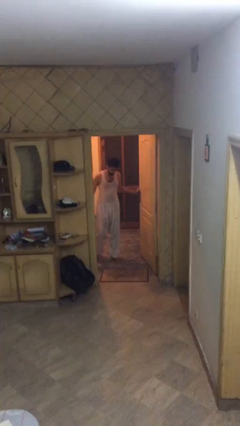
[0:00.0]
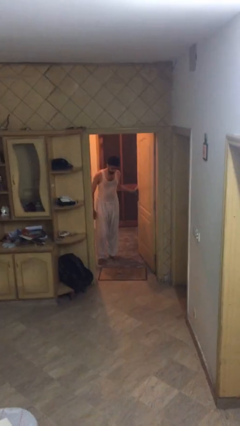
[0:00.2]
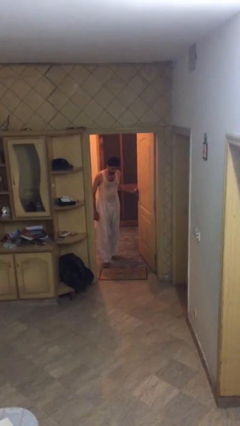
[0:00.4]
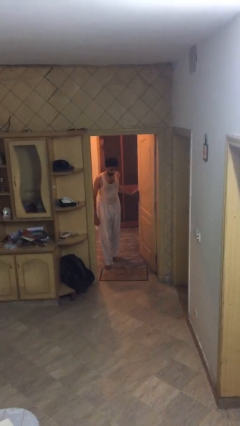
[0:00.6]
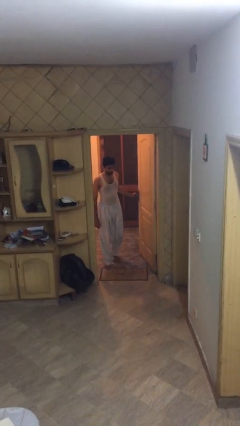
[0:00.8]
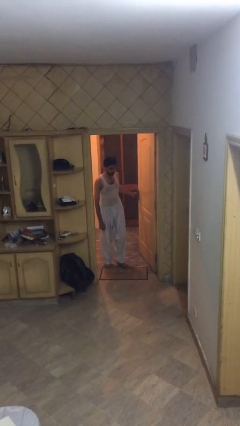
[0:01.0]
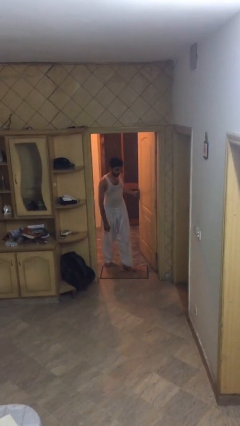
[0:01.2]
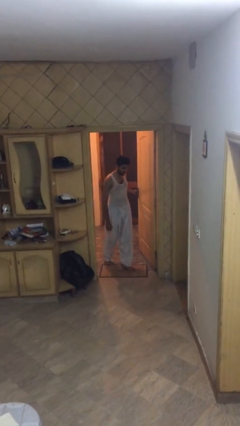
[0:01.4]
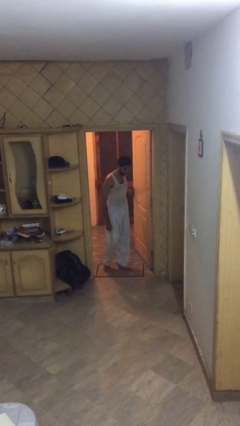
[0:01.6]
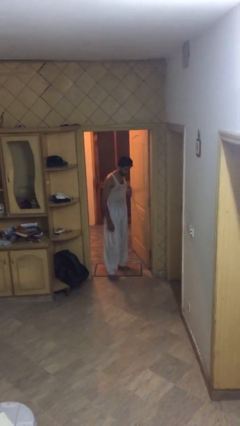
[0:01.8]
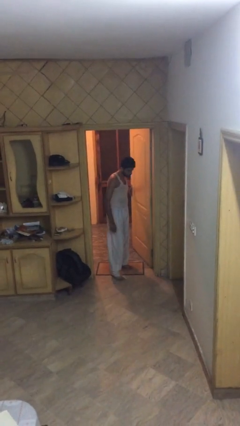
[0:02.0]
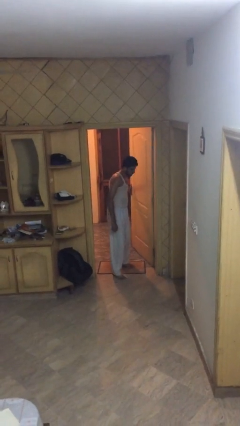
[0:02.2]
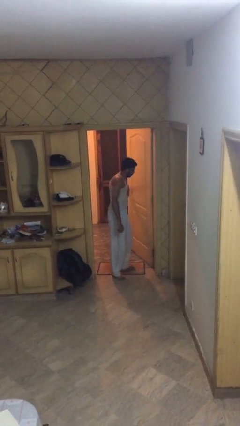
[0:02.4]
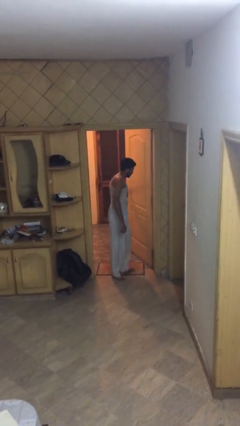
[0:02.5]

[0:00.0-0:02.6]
person enters scene through structure

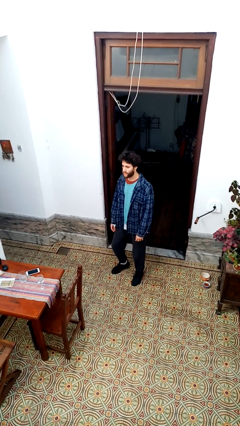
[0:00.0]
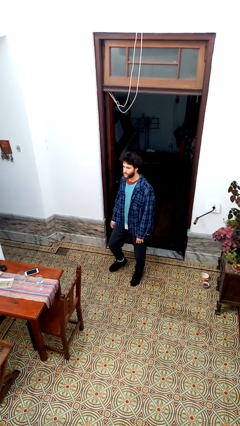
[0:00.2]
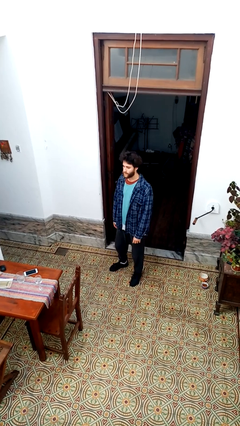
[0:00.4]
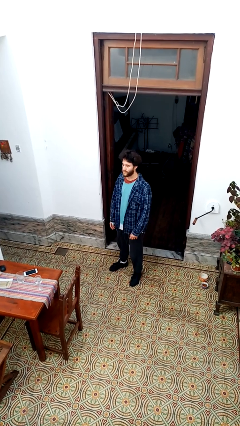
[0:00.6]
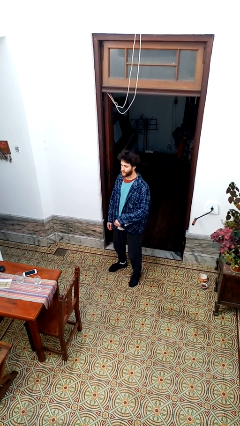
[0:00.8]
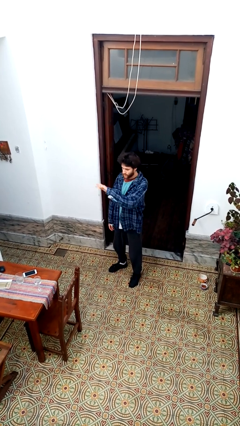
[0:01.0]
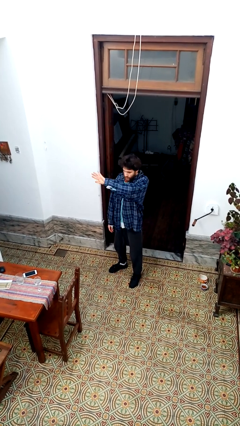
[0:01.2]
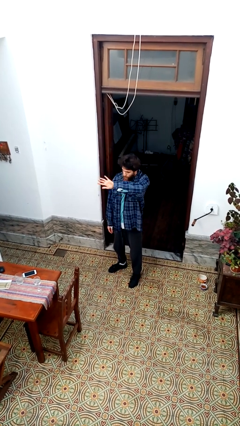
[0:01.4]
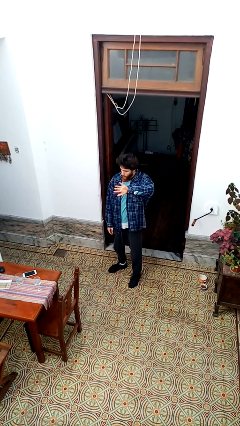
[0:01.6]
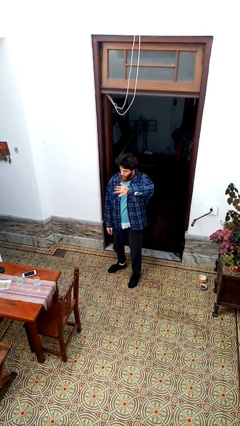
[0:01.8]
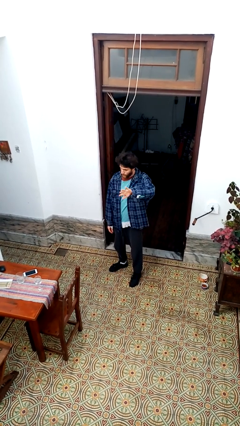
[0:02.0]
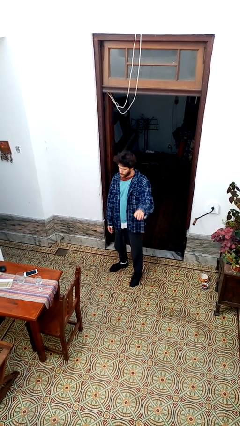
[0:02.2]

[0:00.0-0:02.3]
person gestures swipe left

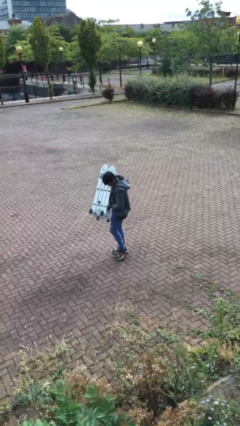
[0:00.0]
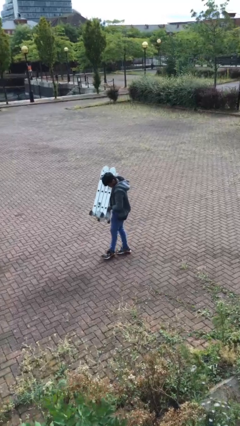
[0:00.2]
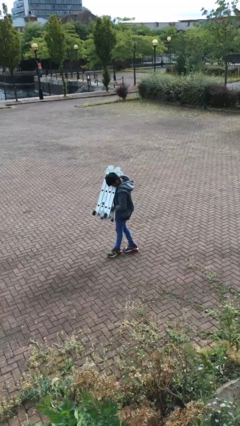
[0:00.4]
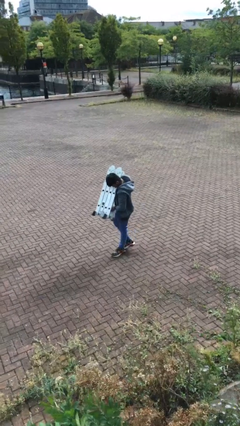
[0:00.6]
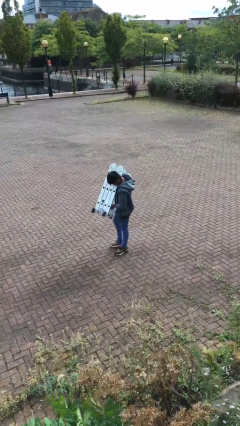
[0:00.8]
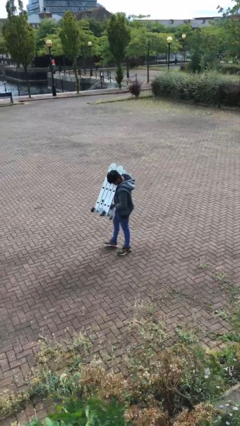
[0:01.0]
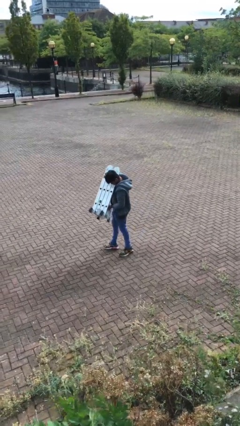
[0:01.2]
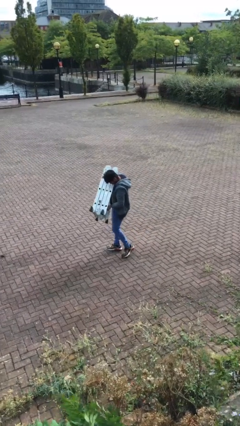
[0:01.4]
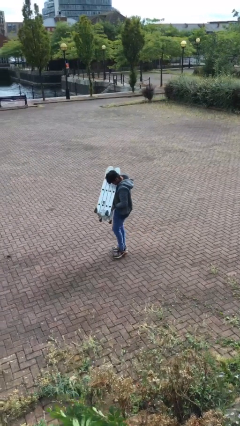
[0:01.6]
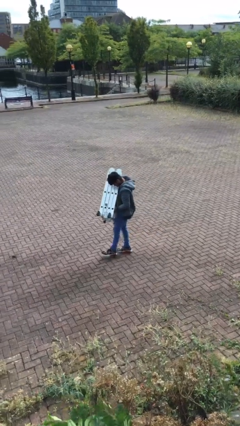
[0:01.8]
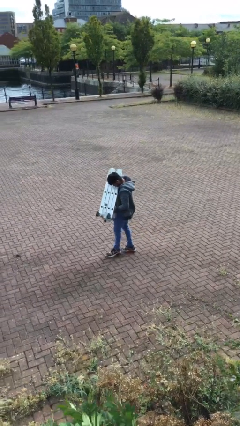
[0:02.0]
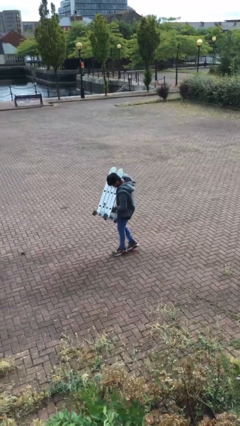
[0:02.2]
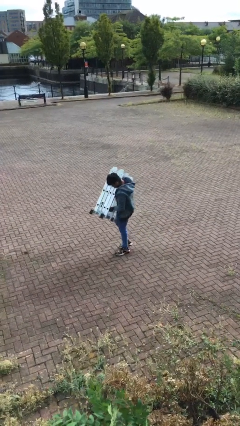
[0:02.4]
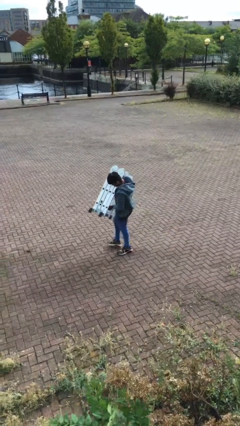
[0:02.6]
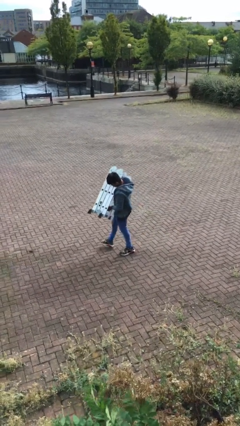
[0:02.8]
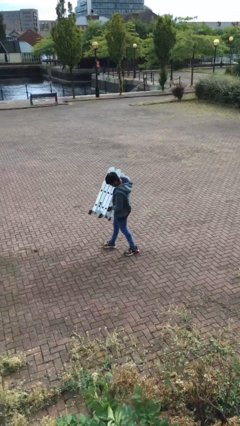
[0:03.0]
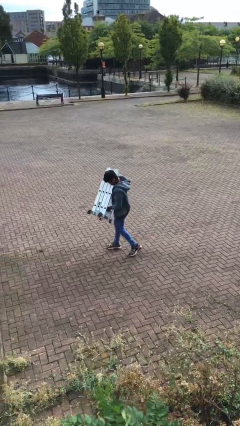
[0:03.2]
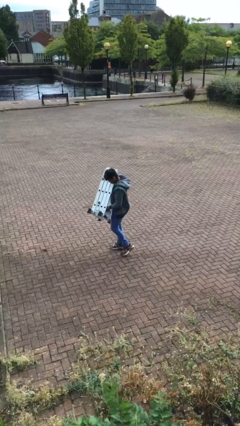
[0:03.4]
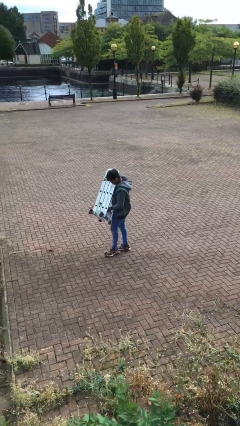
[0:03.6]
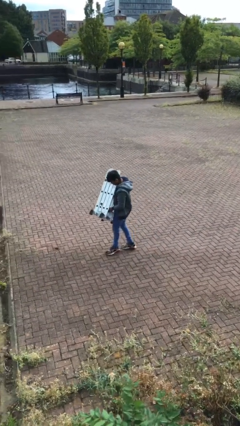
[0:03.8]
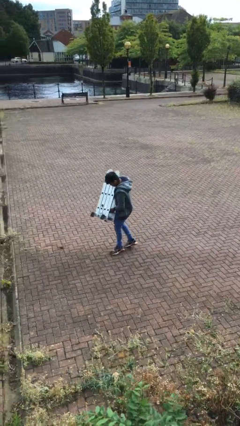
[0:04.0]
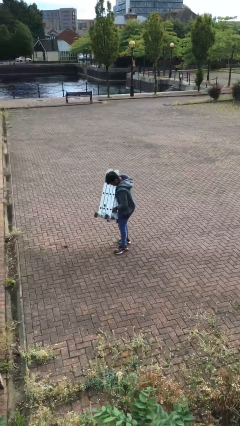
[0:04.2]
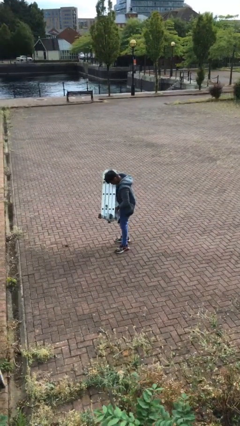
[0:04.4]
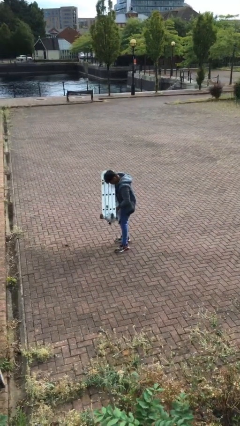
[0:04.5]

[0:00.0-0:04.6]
person carries heavy object

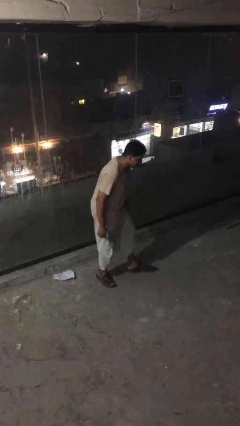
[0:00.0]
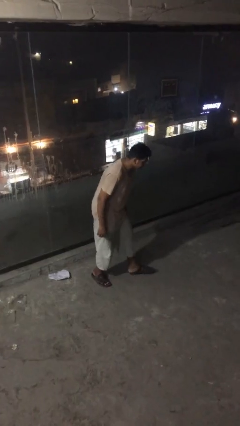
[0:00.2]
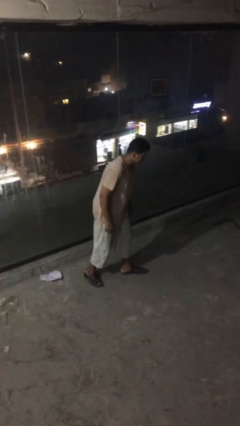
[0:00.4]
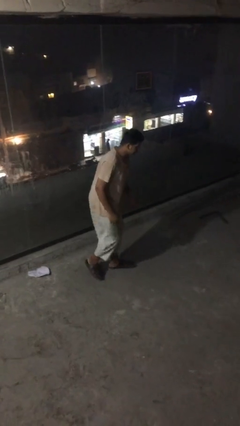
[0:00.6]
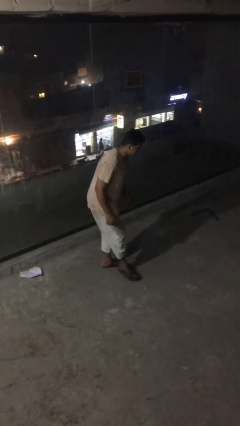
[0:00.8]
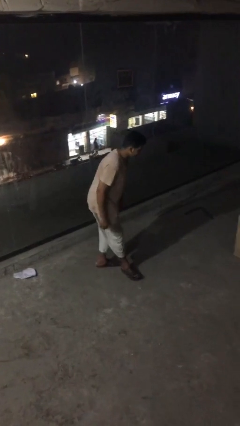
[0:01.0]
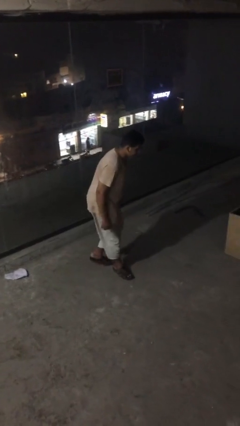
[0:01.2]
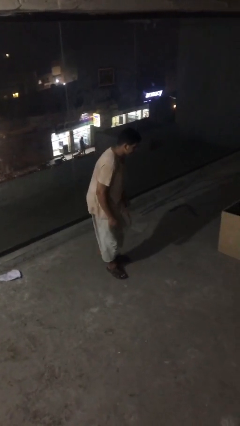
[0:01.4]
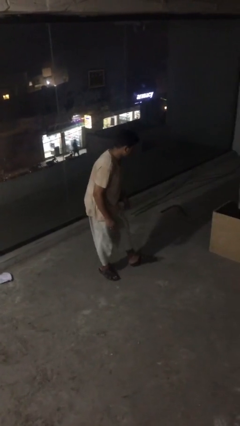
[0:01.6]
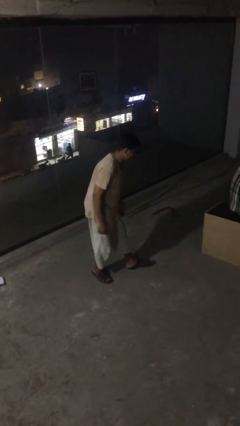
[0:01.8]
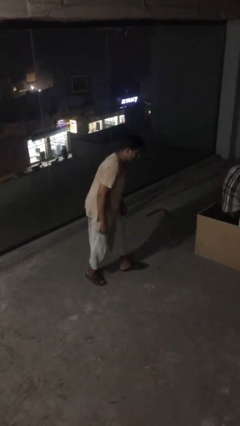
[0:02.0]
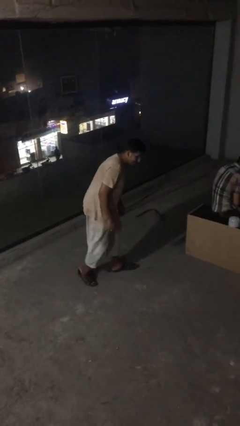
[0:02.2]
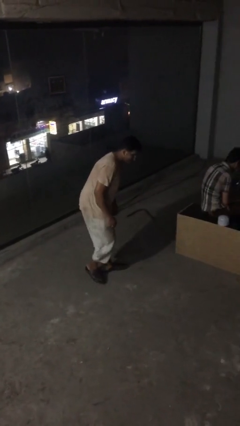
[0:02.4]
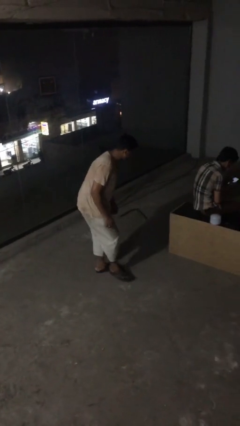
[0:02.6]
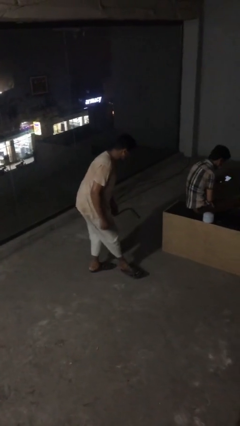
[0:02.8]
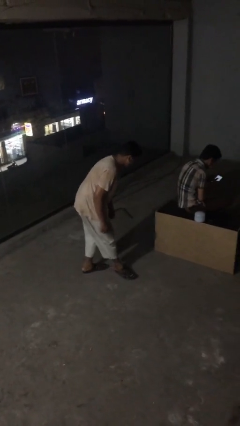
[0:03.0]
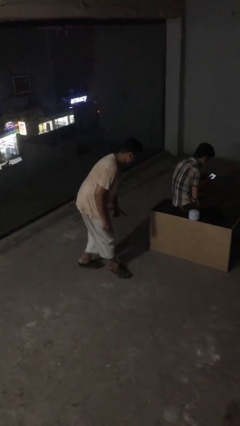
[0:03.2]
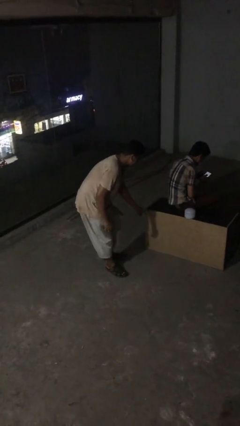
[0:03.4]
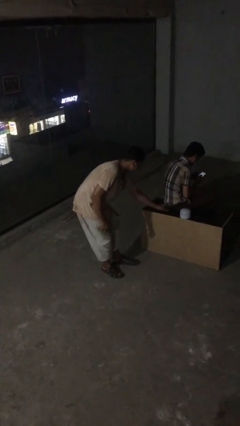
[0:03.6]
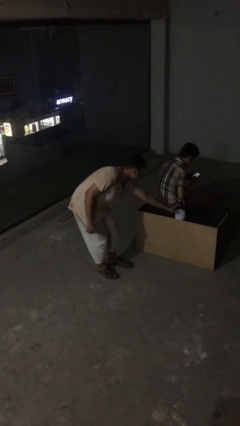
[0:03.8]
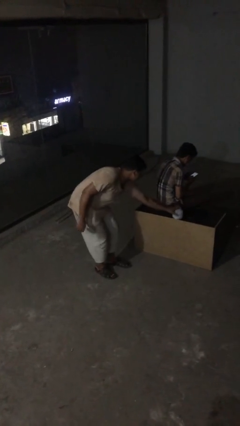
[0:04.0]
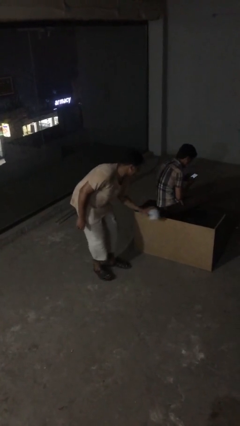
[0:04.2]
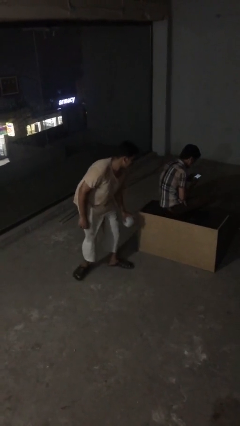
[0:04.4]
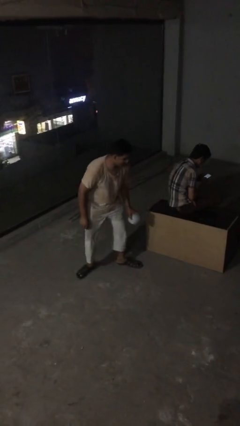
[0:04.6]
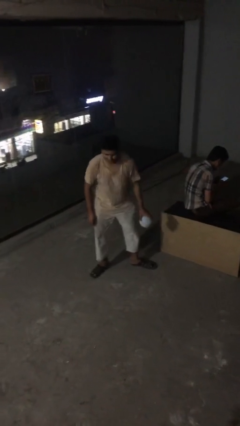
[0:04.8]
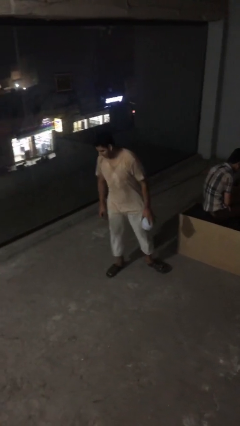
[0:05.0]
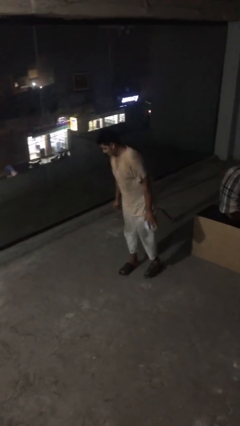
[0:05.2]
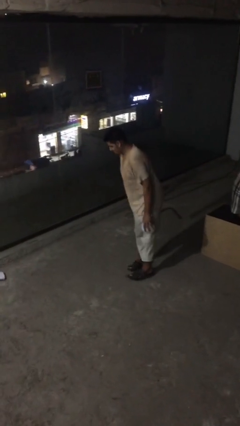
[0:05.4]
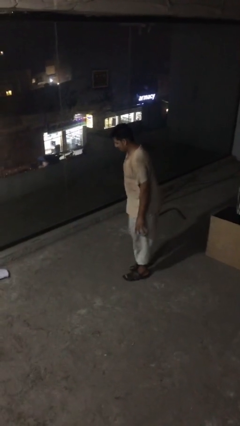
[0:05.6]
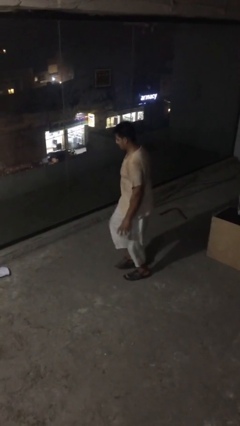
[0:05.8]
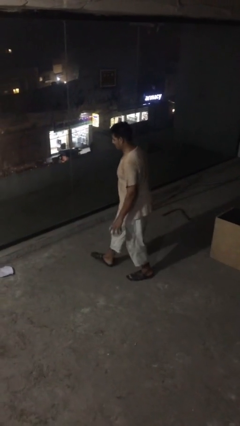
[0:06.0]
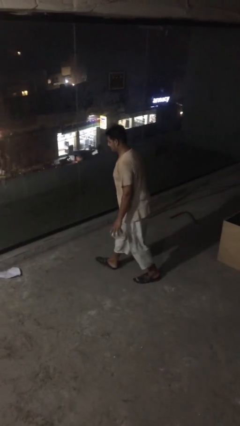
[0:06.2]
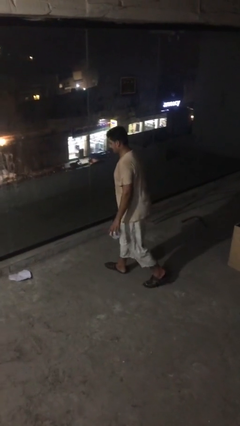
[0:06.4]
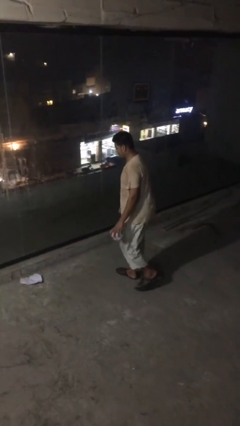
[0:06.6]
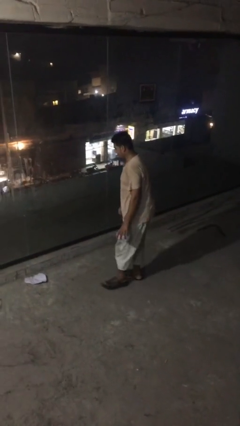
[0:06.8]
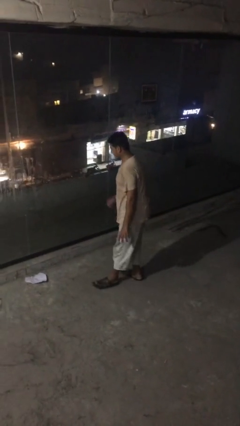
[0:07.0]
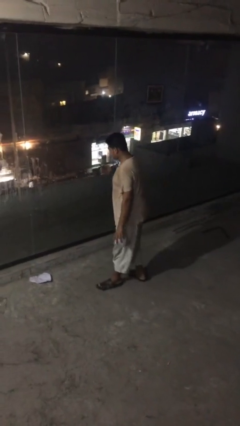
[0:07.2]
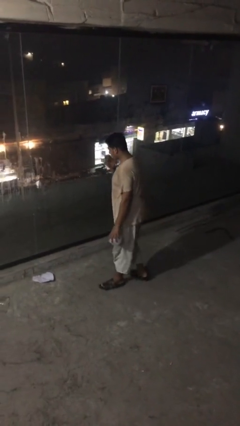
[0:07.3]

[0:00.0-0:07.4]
person steals object from person

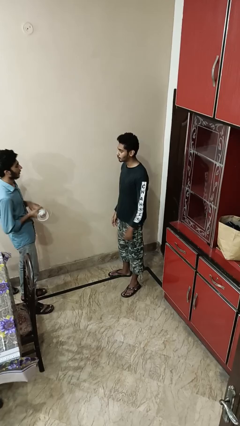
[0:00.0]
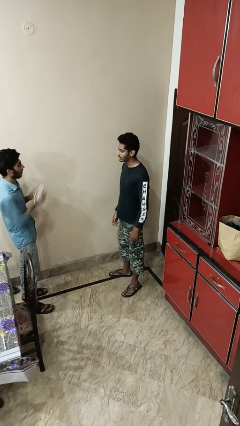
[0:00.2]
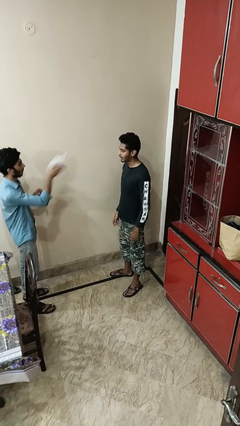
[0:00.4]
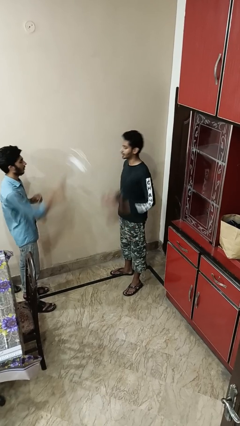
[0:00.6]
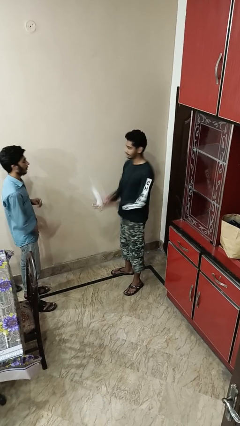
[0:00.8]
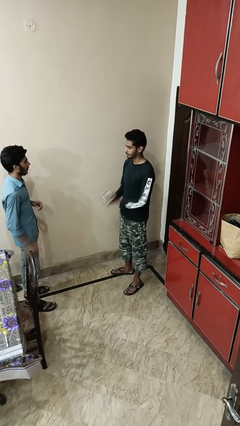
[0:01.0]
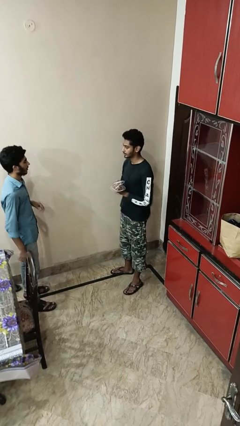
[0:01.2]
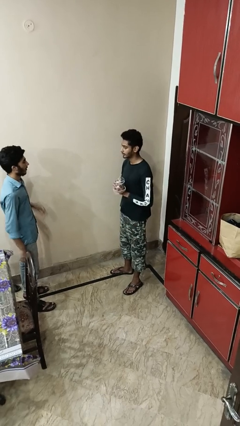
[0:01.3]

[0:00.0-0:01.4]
person catches object from person
